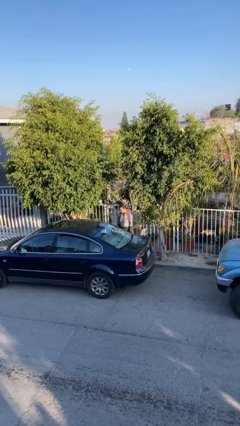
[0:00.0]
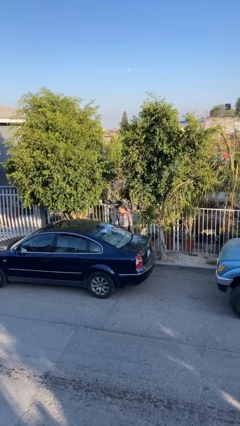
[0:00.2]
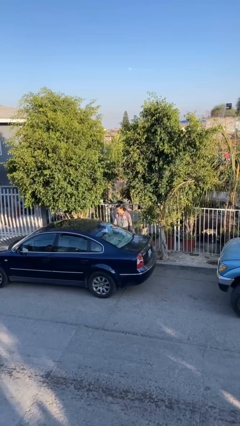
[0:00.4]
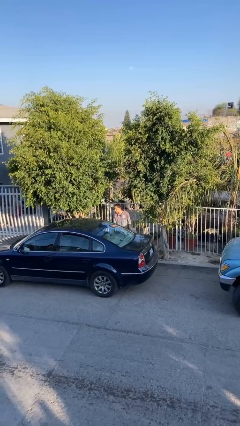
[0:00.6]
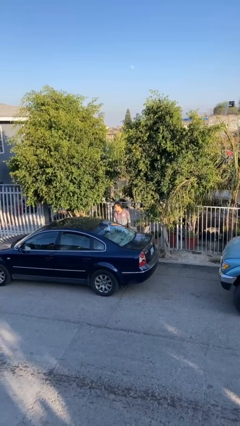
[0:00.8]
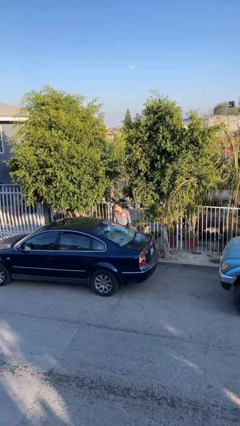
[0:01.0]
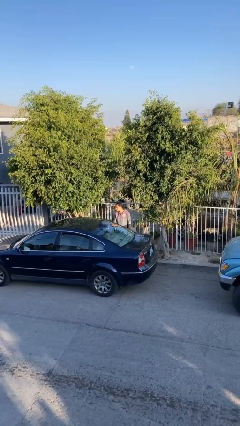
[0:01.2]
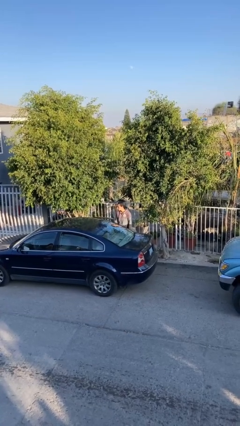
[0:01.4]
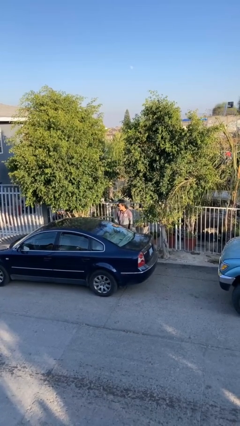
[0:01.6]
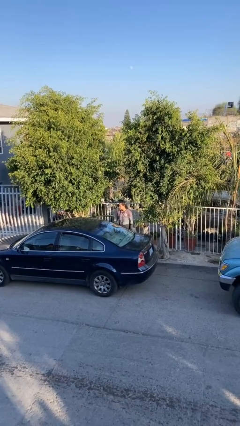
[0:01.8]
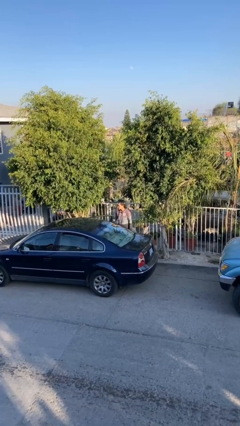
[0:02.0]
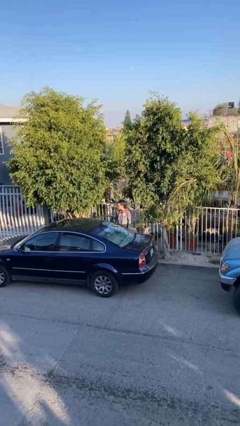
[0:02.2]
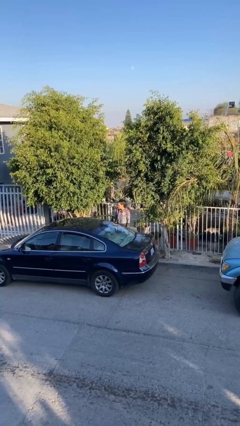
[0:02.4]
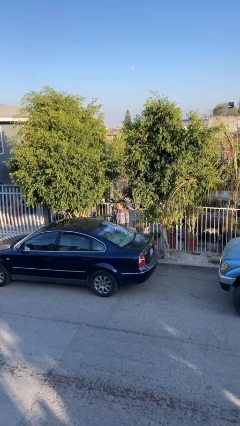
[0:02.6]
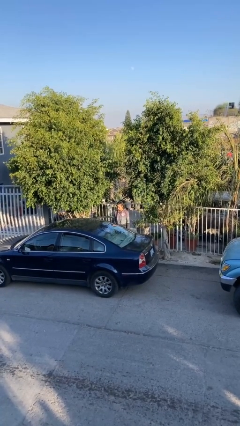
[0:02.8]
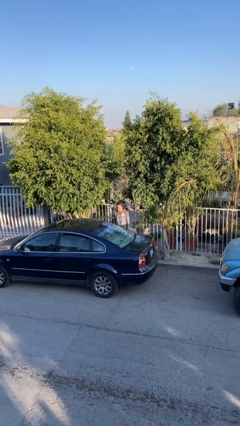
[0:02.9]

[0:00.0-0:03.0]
person opens car door

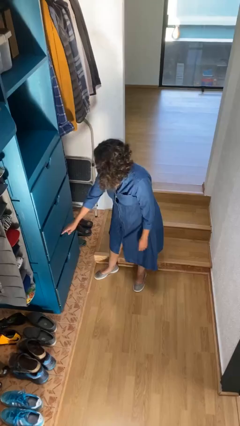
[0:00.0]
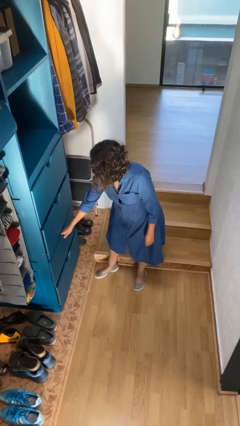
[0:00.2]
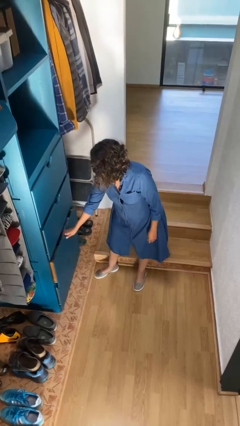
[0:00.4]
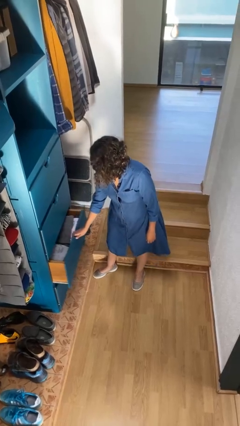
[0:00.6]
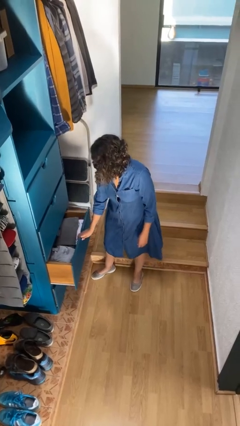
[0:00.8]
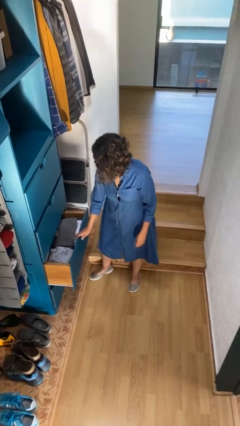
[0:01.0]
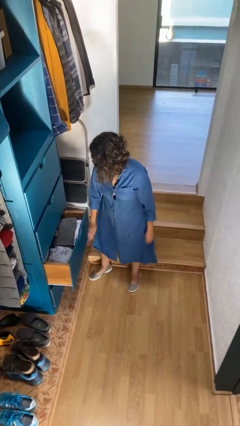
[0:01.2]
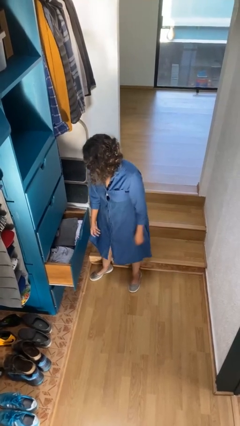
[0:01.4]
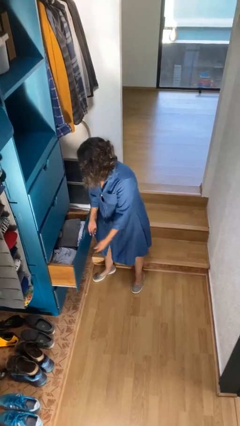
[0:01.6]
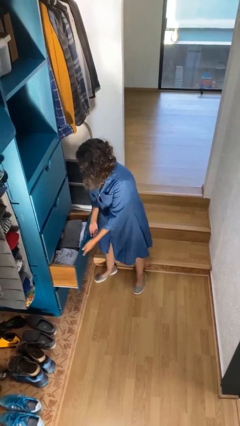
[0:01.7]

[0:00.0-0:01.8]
person opens dresser drawer

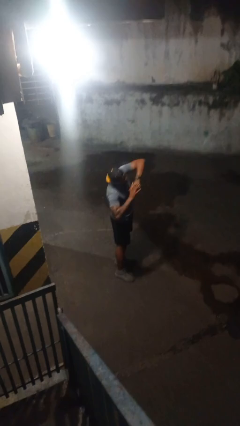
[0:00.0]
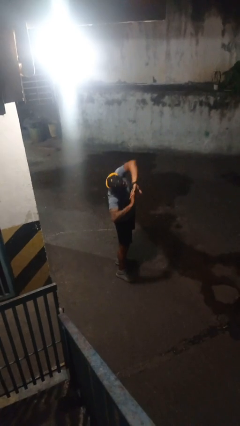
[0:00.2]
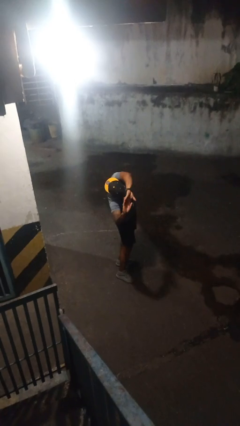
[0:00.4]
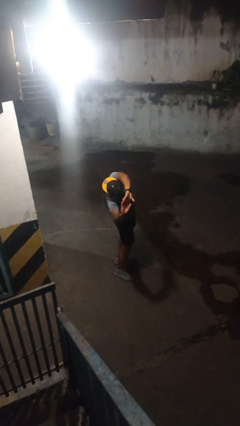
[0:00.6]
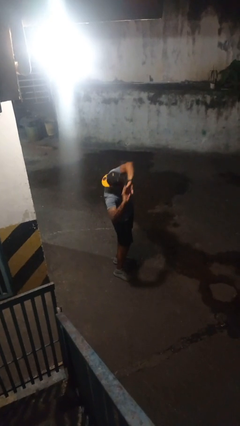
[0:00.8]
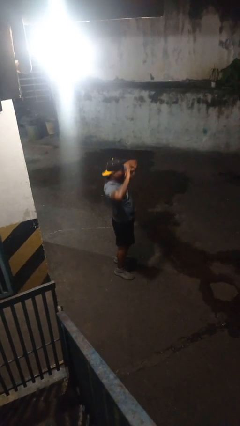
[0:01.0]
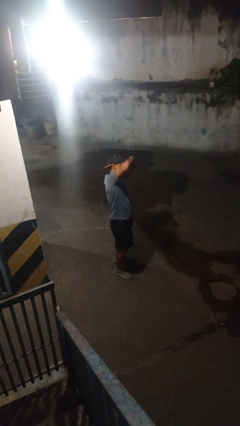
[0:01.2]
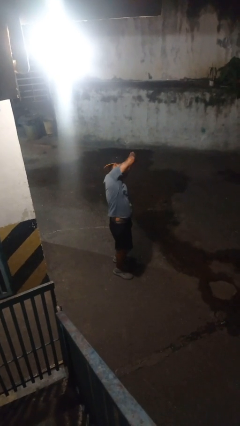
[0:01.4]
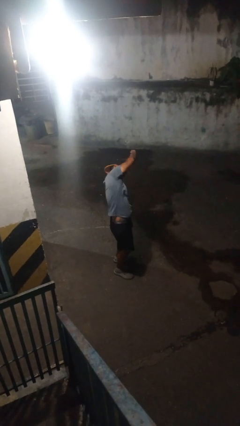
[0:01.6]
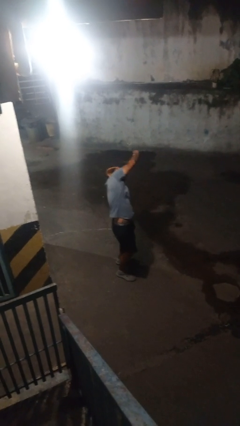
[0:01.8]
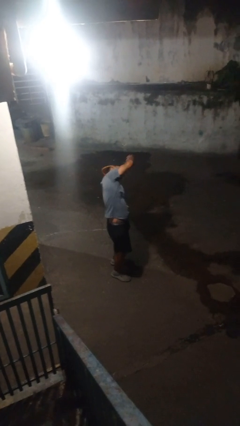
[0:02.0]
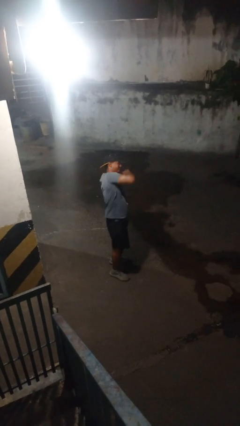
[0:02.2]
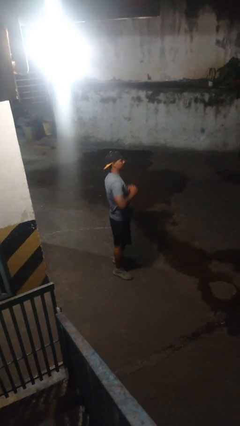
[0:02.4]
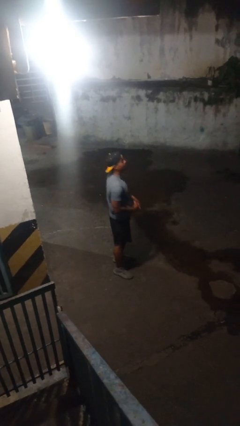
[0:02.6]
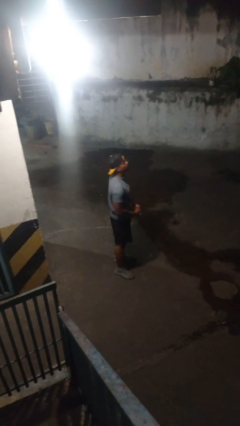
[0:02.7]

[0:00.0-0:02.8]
person stretches arms to side

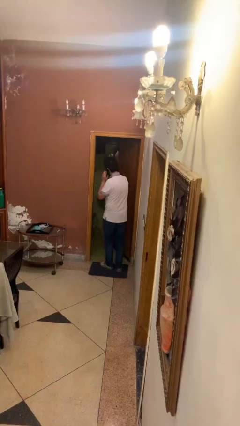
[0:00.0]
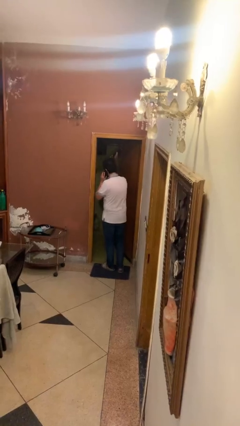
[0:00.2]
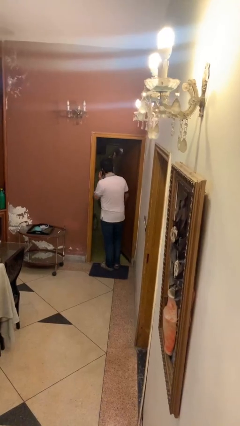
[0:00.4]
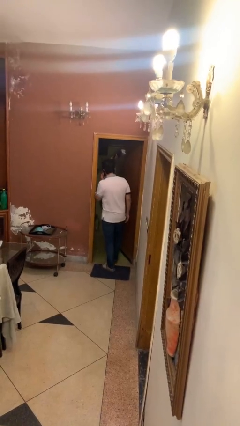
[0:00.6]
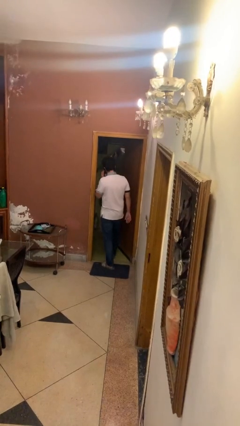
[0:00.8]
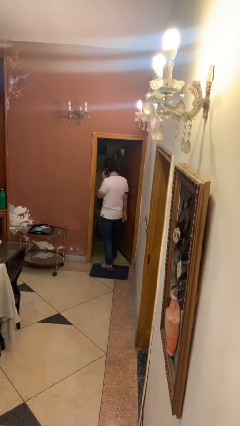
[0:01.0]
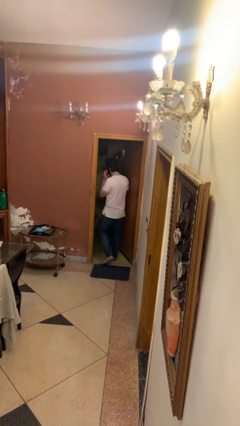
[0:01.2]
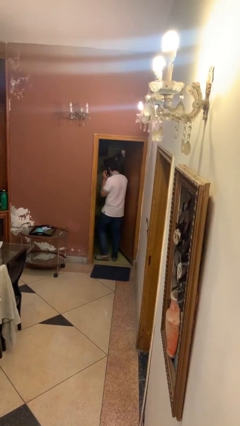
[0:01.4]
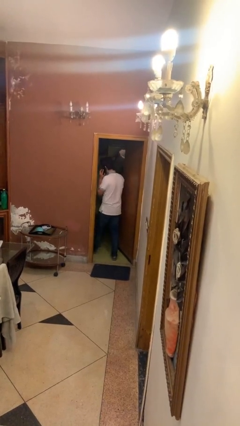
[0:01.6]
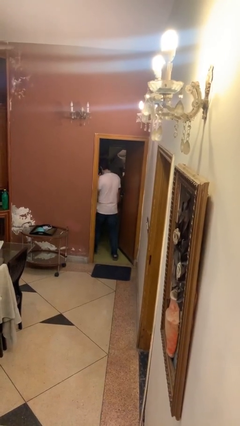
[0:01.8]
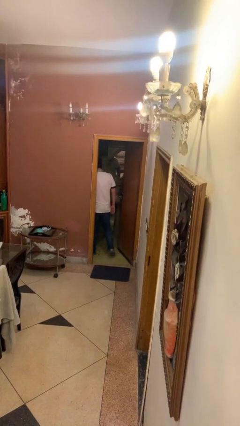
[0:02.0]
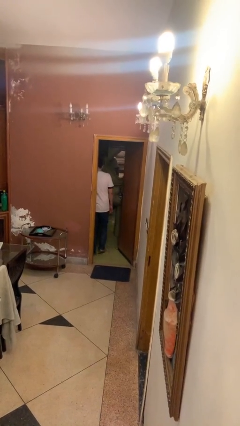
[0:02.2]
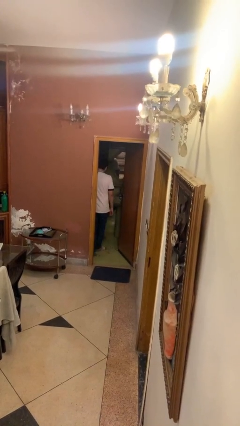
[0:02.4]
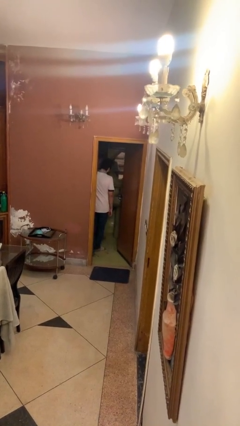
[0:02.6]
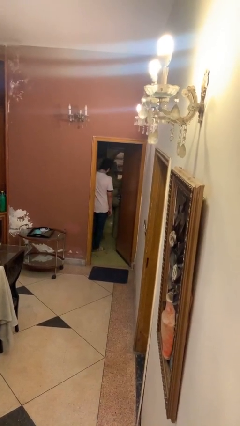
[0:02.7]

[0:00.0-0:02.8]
person exits scene through structure

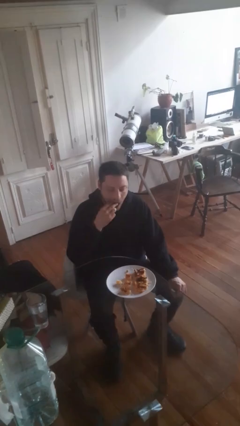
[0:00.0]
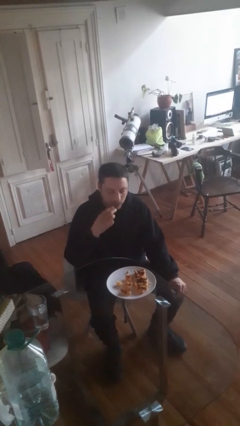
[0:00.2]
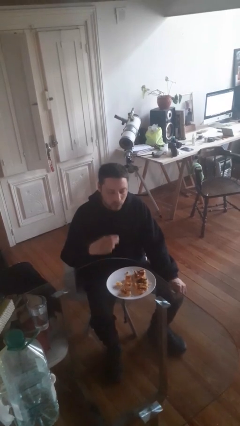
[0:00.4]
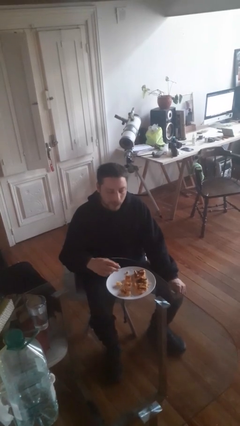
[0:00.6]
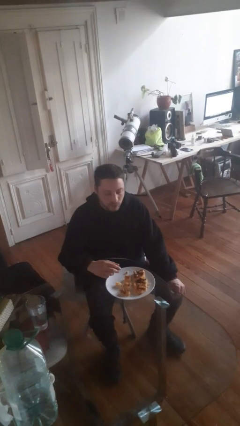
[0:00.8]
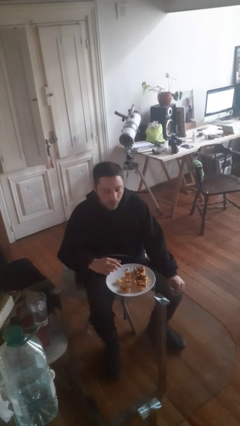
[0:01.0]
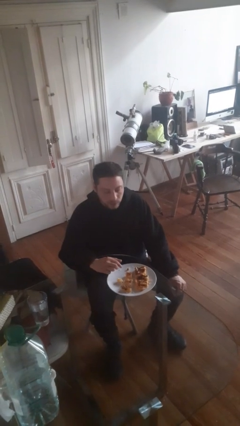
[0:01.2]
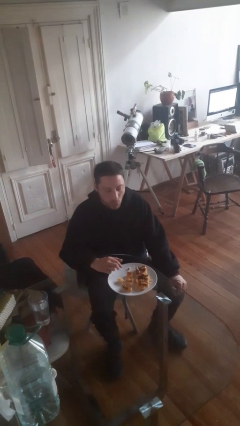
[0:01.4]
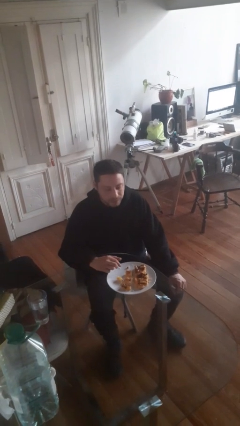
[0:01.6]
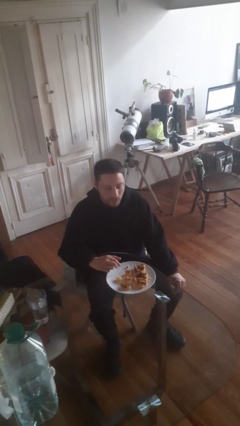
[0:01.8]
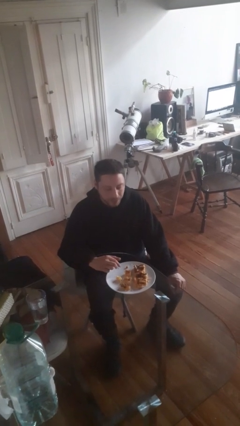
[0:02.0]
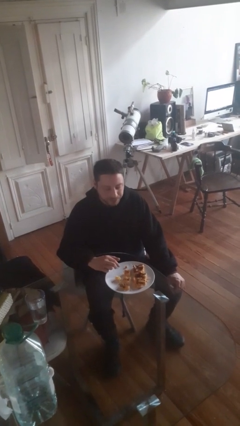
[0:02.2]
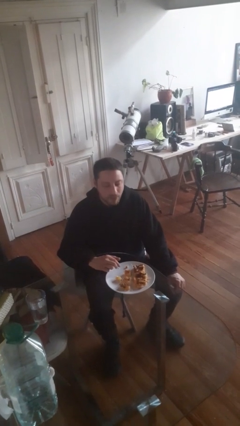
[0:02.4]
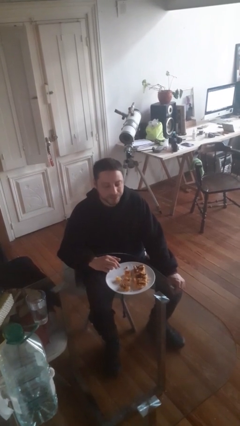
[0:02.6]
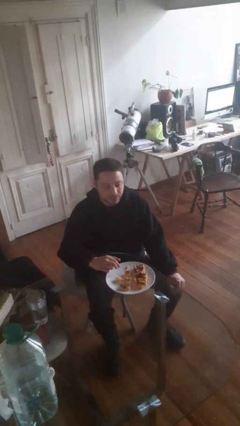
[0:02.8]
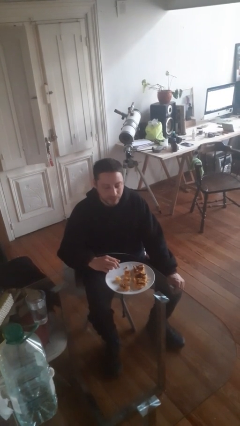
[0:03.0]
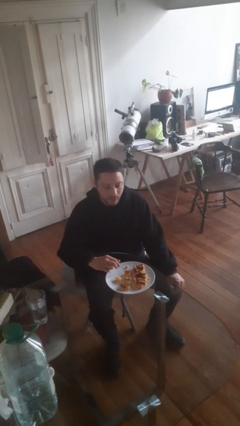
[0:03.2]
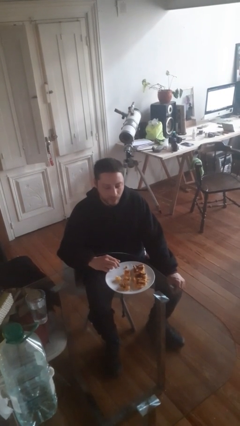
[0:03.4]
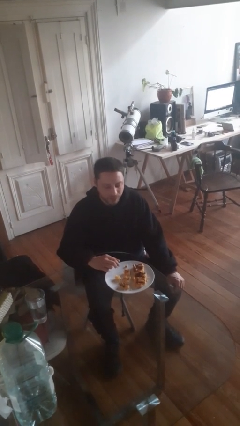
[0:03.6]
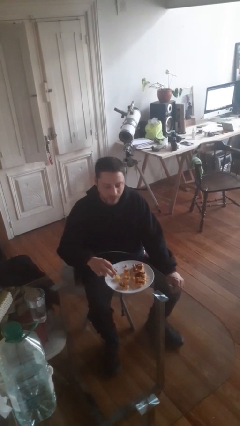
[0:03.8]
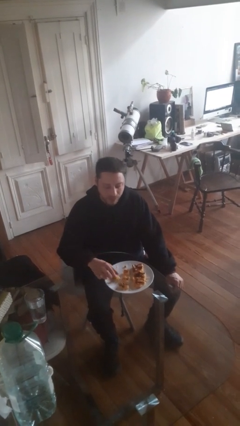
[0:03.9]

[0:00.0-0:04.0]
person eats with hands

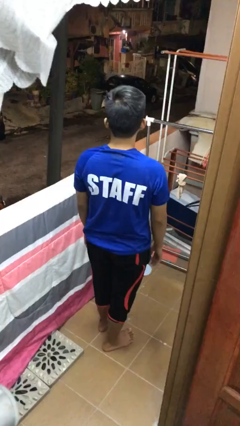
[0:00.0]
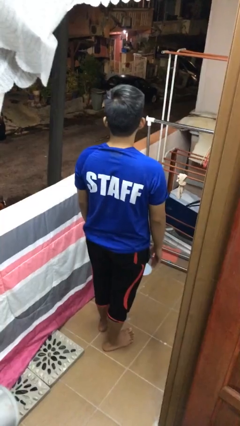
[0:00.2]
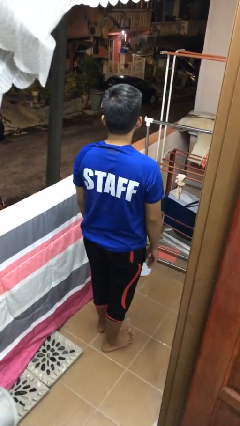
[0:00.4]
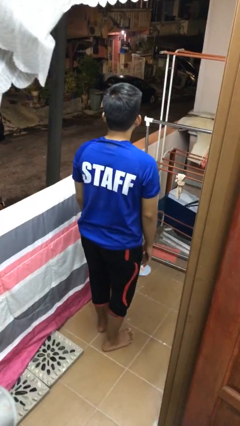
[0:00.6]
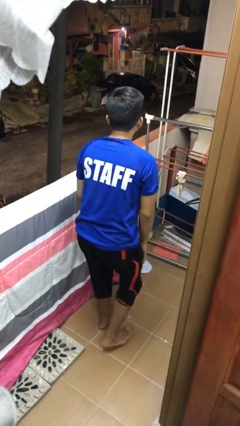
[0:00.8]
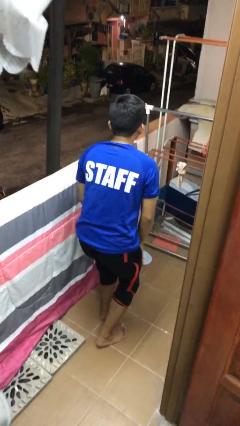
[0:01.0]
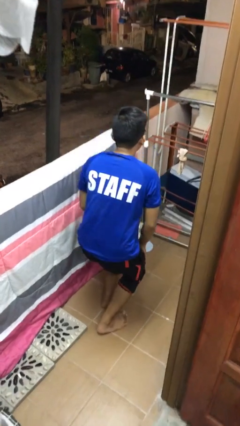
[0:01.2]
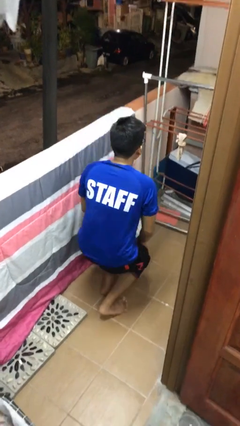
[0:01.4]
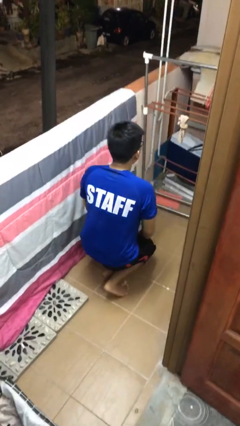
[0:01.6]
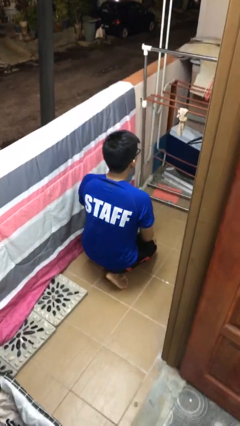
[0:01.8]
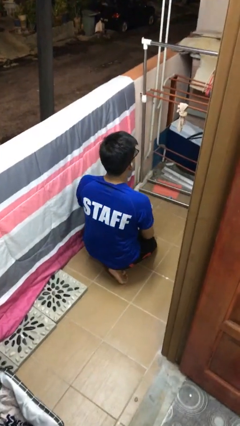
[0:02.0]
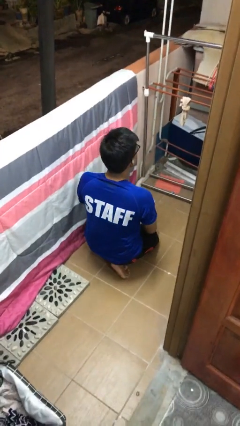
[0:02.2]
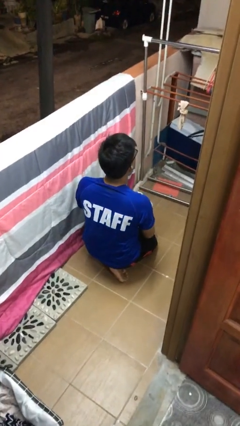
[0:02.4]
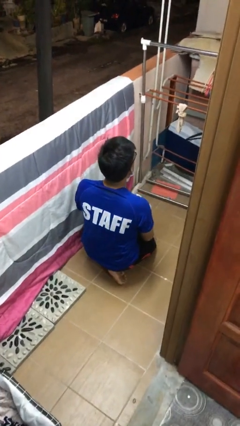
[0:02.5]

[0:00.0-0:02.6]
person kneels

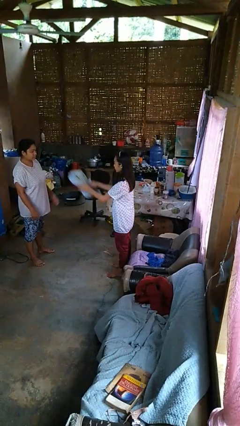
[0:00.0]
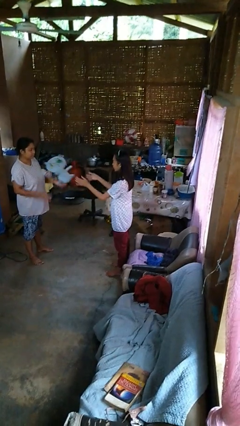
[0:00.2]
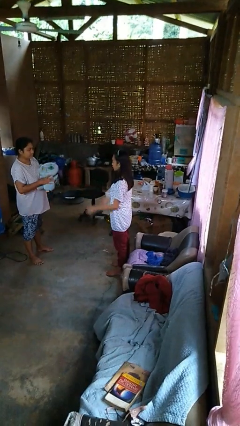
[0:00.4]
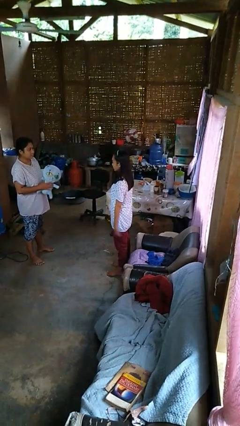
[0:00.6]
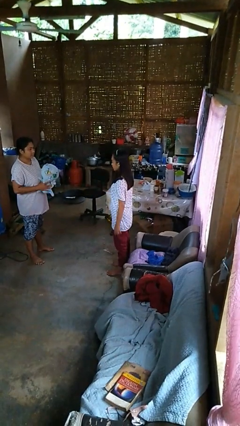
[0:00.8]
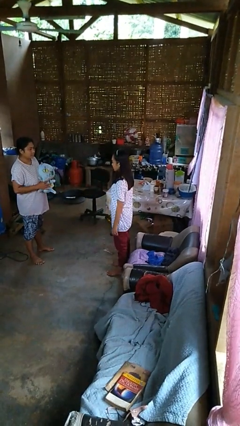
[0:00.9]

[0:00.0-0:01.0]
person throws object to person
